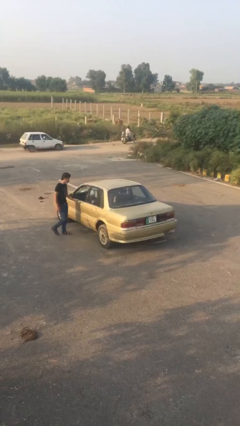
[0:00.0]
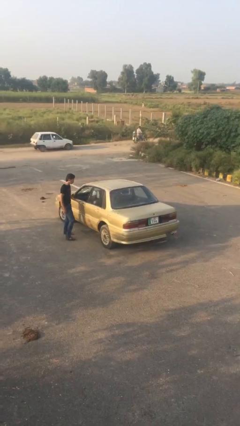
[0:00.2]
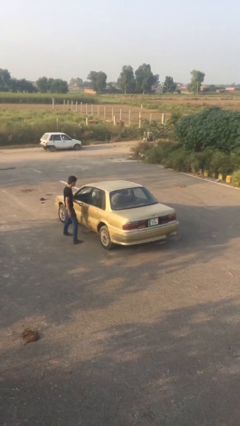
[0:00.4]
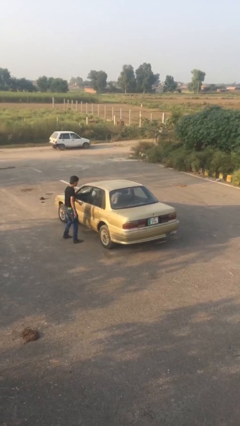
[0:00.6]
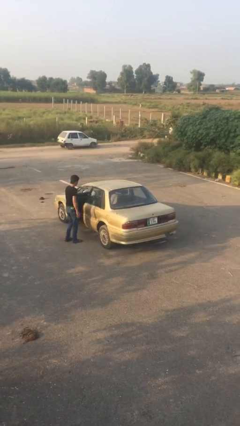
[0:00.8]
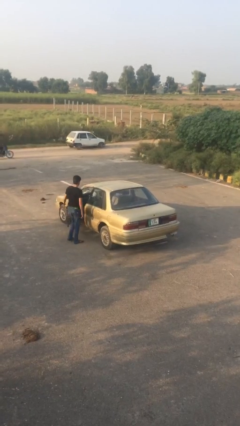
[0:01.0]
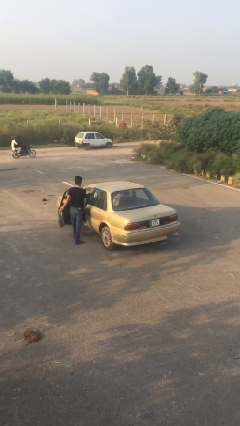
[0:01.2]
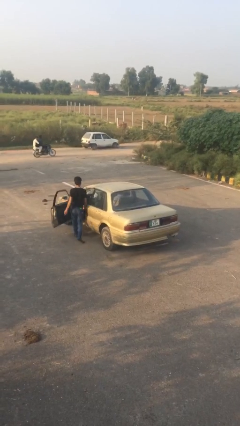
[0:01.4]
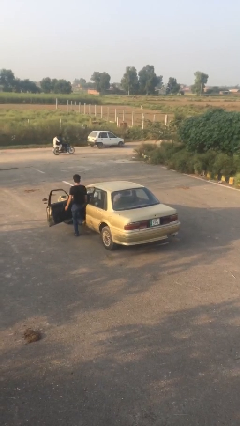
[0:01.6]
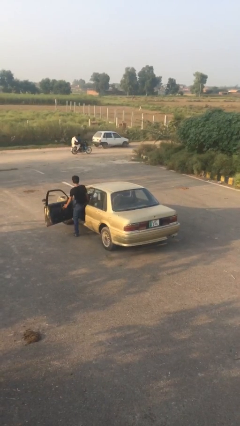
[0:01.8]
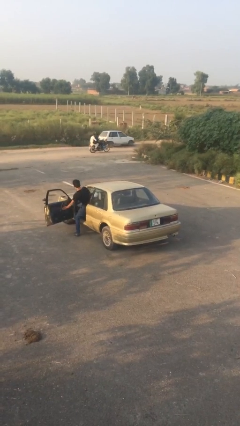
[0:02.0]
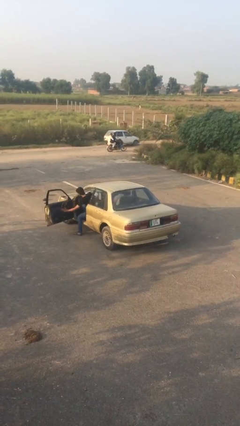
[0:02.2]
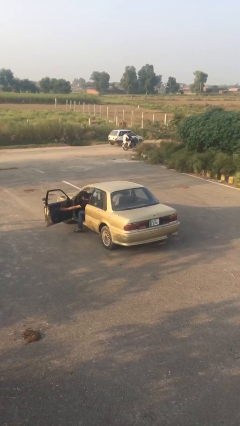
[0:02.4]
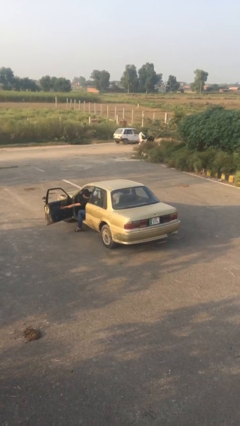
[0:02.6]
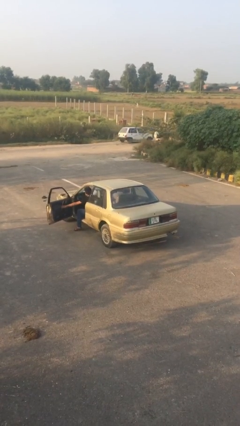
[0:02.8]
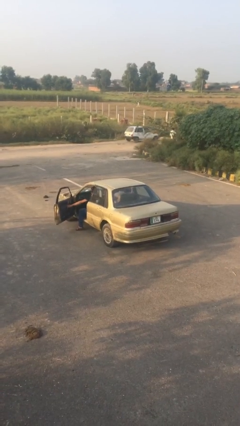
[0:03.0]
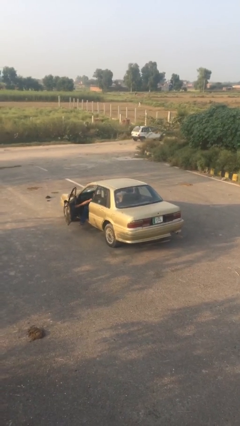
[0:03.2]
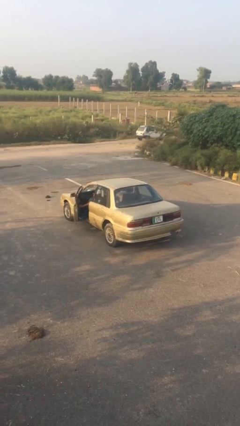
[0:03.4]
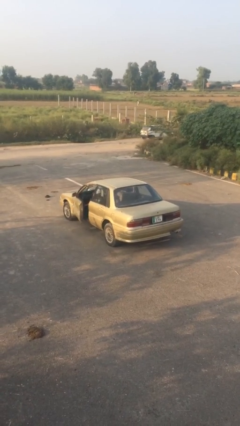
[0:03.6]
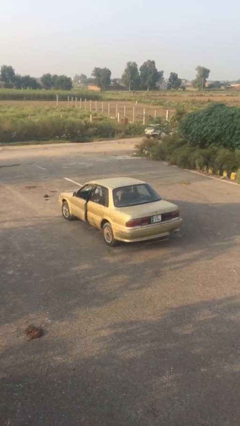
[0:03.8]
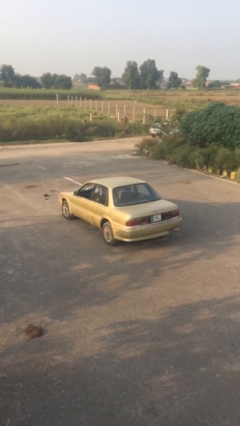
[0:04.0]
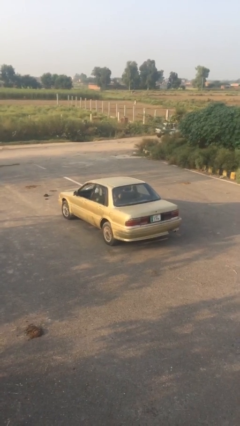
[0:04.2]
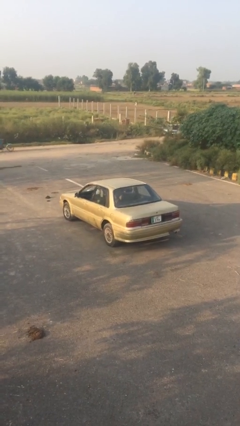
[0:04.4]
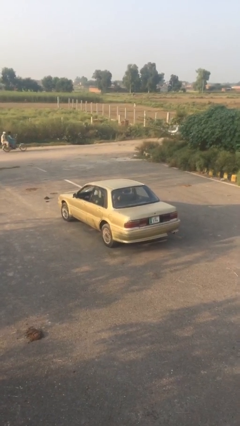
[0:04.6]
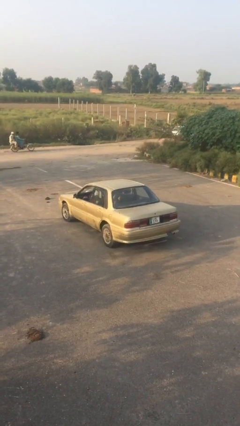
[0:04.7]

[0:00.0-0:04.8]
car picks up person

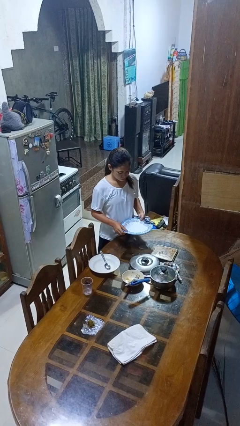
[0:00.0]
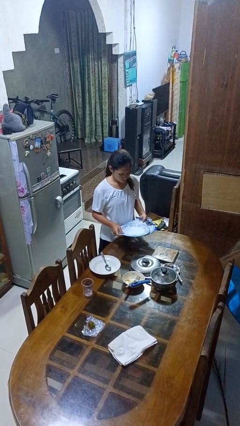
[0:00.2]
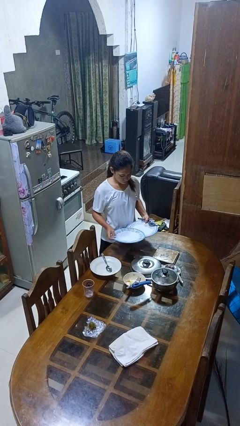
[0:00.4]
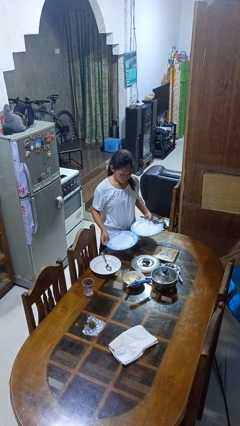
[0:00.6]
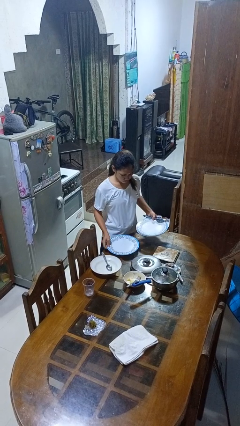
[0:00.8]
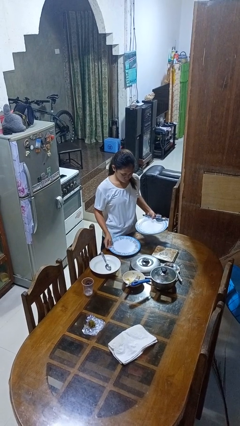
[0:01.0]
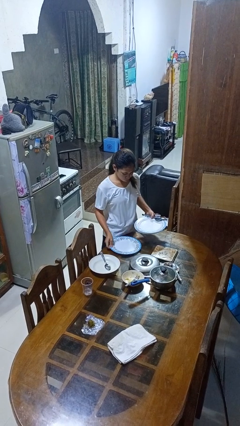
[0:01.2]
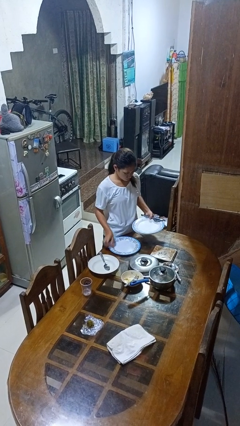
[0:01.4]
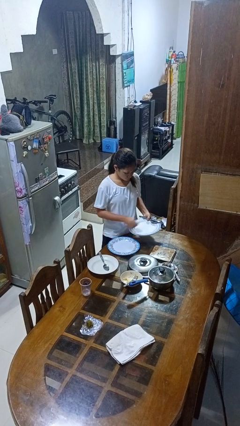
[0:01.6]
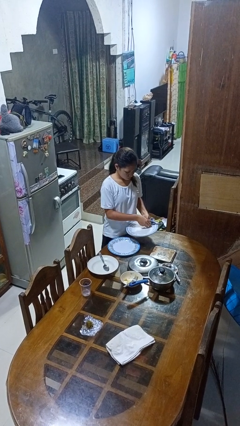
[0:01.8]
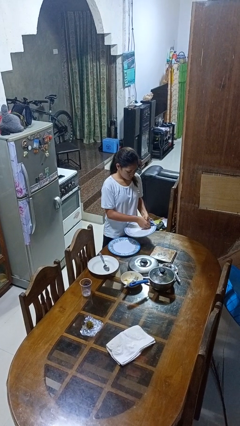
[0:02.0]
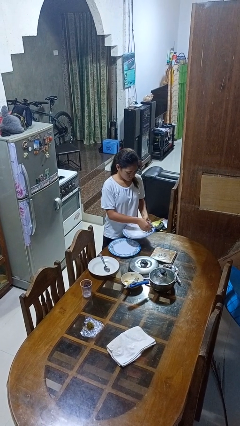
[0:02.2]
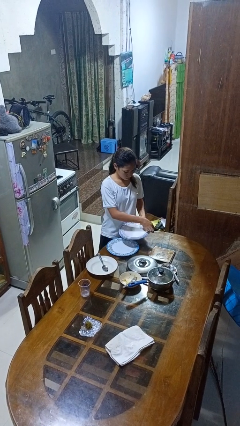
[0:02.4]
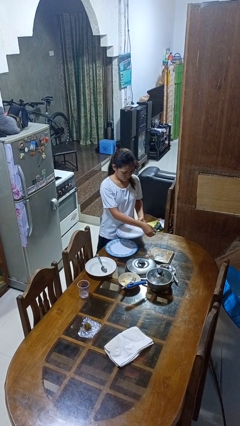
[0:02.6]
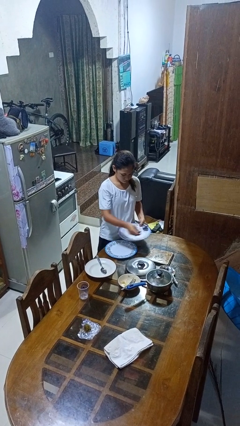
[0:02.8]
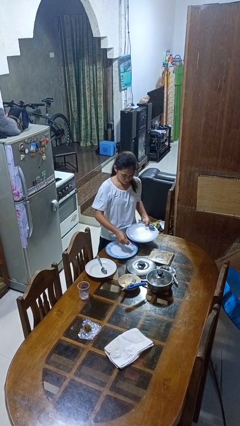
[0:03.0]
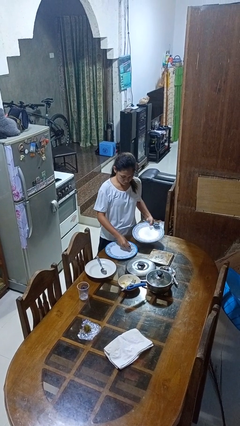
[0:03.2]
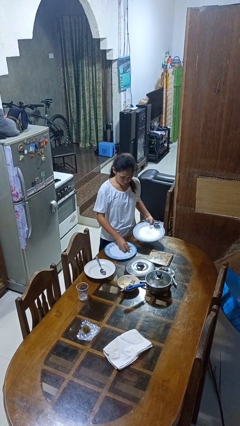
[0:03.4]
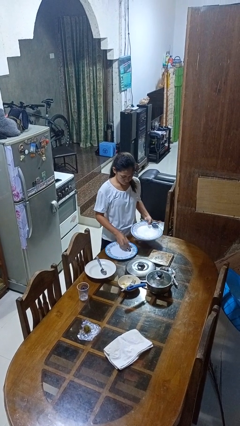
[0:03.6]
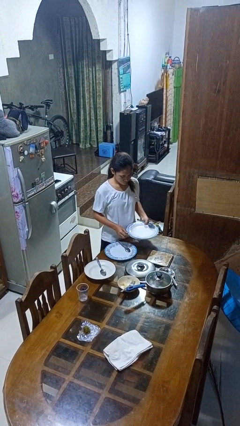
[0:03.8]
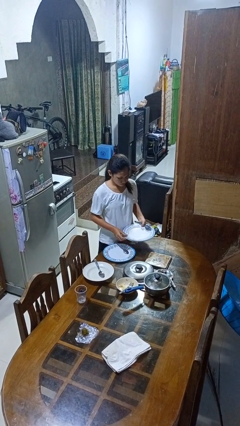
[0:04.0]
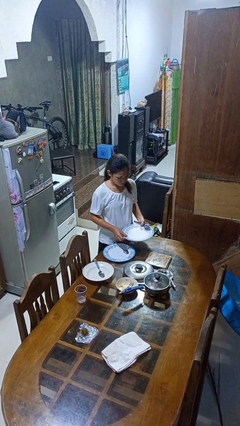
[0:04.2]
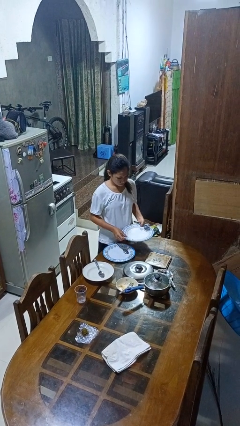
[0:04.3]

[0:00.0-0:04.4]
person sets table

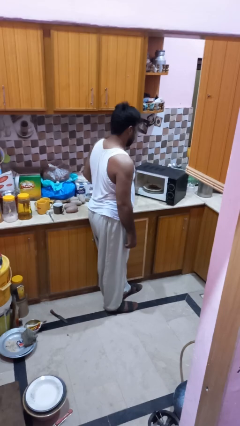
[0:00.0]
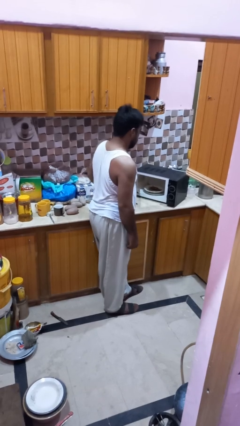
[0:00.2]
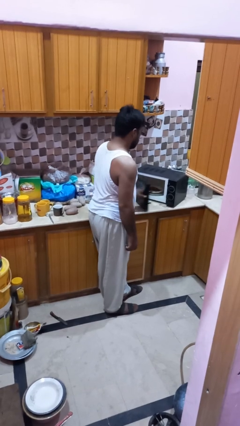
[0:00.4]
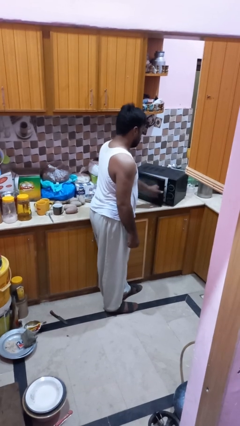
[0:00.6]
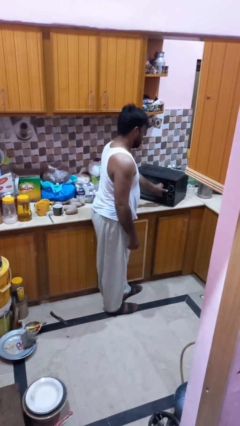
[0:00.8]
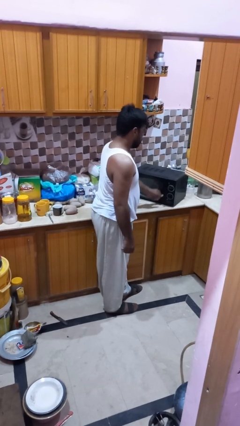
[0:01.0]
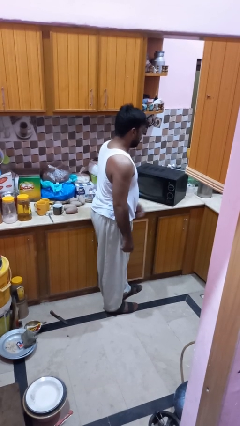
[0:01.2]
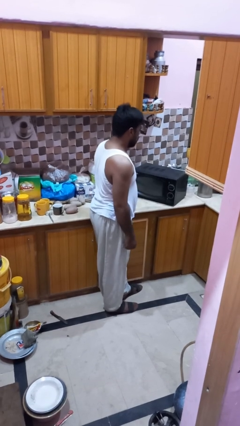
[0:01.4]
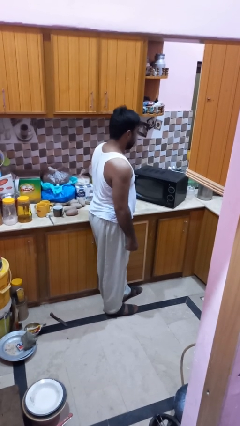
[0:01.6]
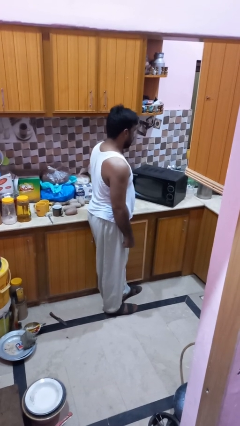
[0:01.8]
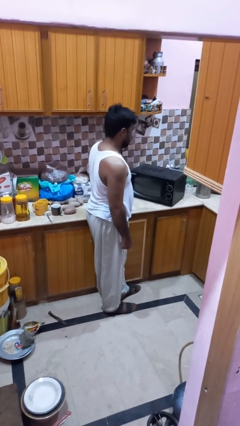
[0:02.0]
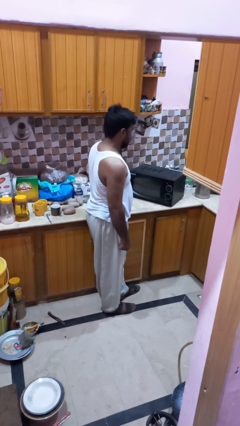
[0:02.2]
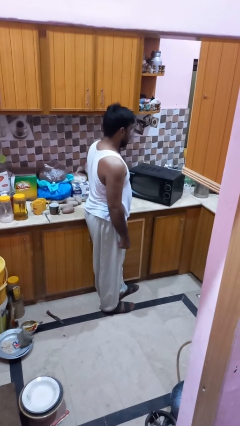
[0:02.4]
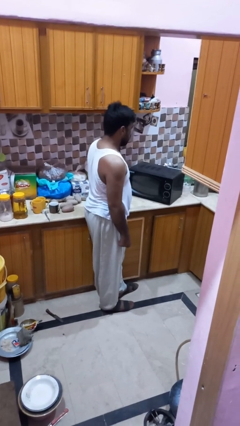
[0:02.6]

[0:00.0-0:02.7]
person closes microwave

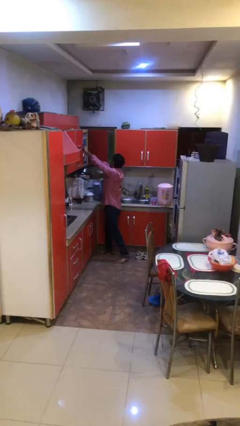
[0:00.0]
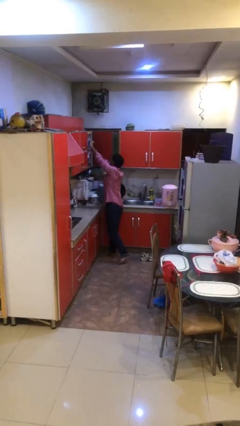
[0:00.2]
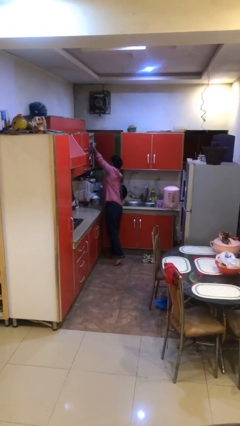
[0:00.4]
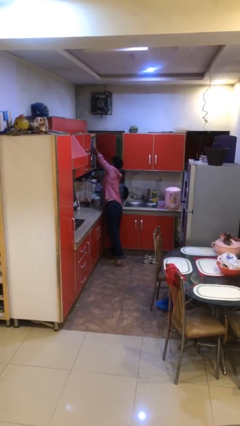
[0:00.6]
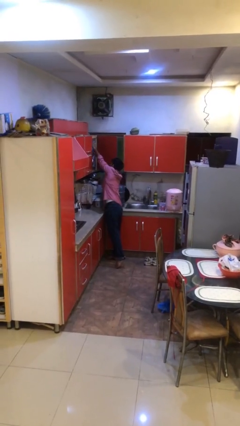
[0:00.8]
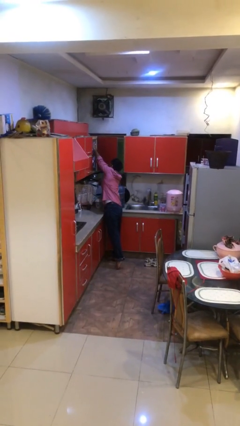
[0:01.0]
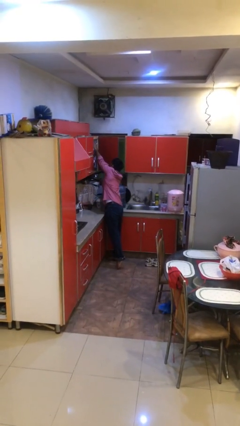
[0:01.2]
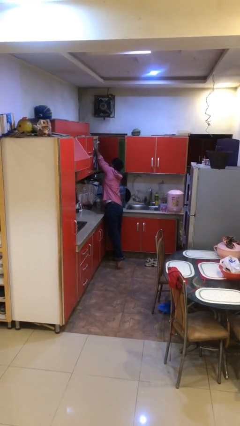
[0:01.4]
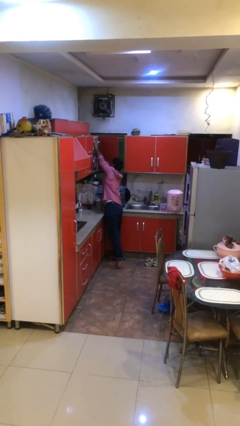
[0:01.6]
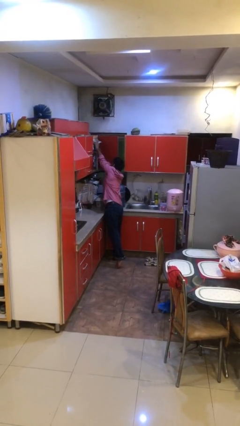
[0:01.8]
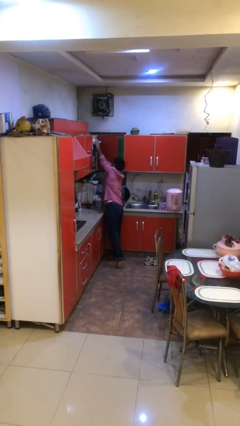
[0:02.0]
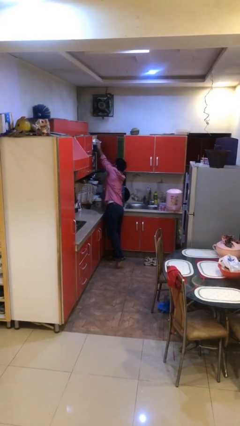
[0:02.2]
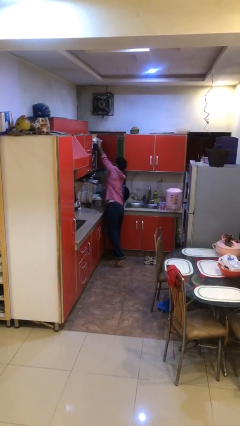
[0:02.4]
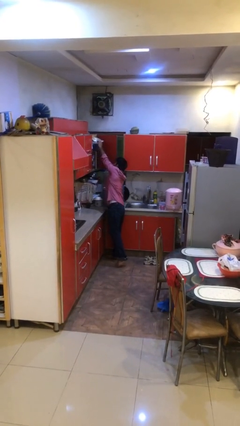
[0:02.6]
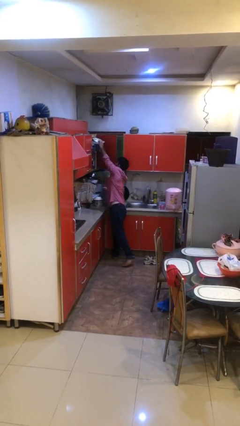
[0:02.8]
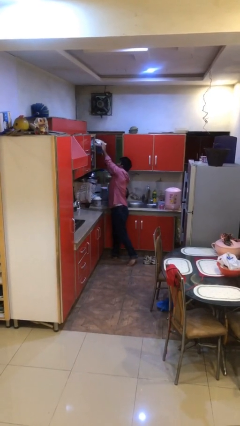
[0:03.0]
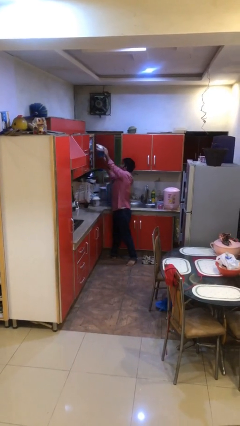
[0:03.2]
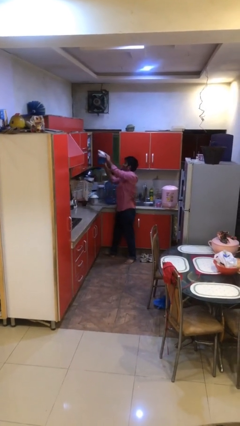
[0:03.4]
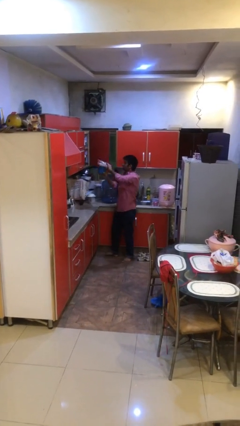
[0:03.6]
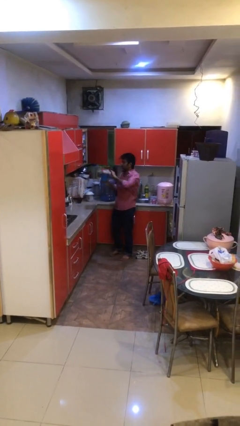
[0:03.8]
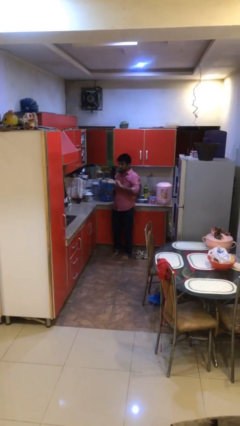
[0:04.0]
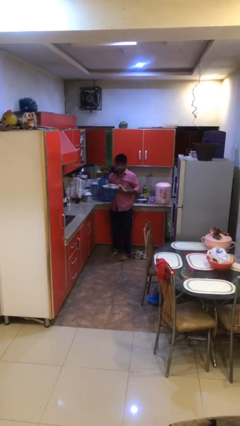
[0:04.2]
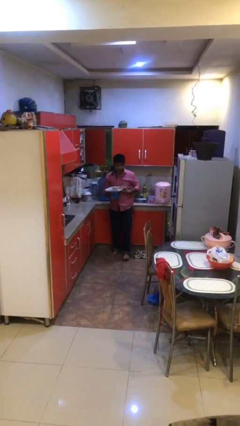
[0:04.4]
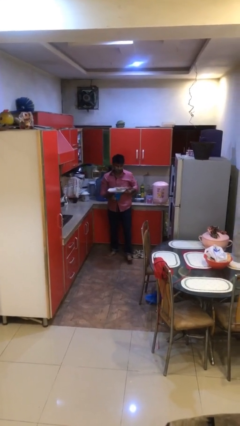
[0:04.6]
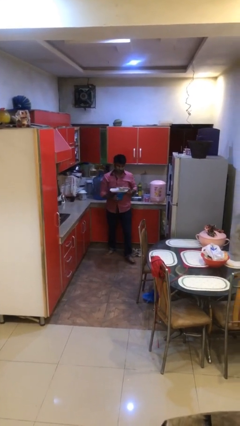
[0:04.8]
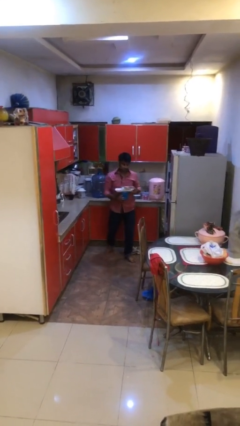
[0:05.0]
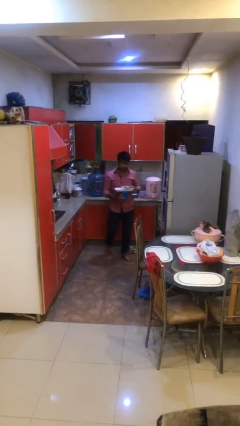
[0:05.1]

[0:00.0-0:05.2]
person picks up object from shelf

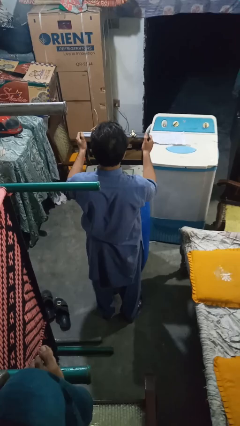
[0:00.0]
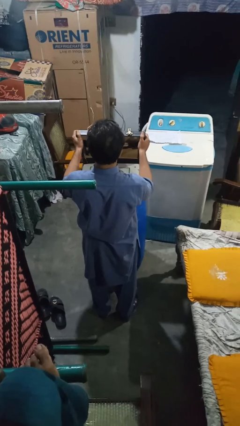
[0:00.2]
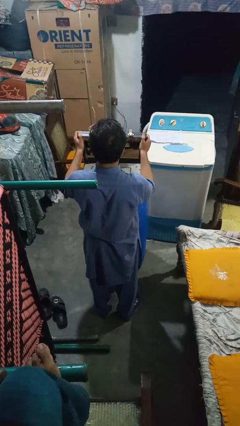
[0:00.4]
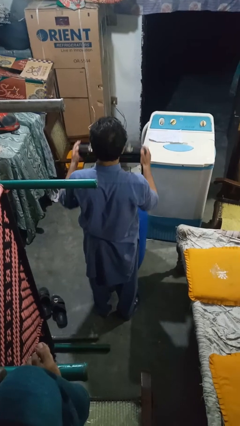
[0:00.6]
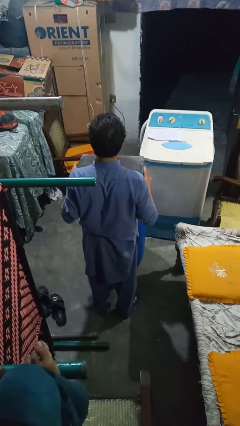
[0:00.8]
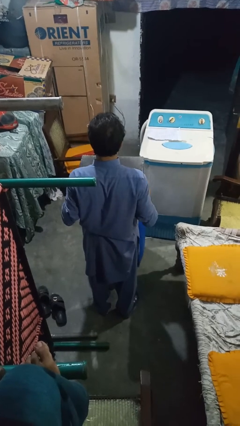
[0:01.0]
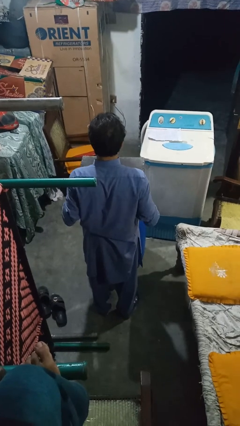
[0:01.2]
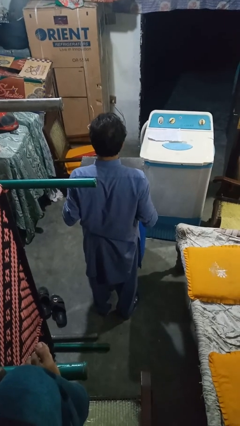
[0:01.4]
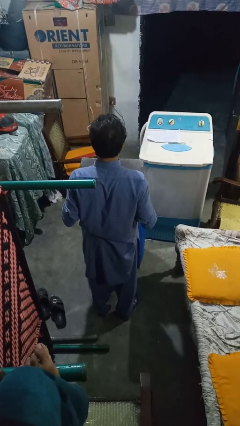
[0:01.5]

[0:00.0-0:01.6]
person closes suitcase
